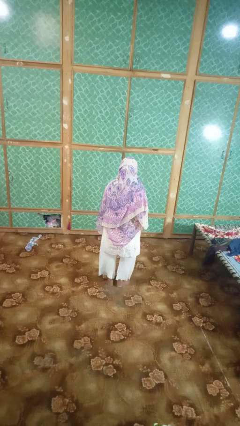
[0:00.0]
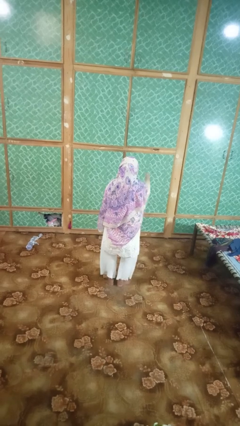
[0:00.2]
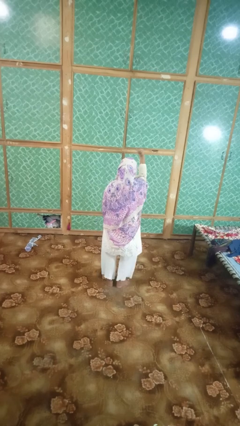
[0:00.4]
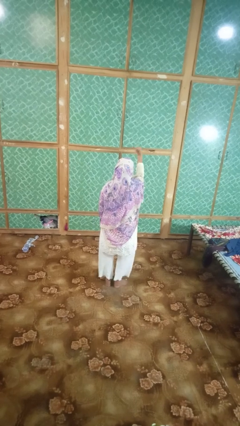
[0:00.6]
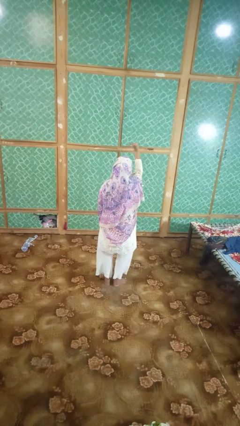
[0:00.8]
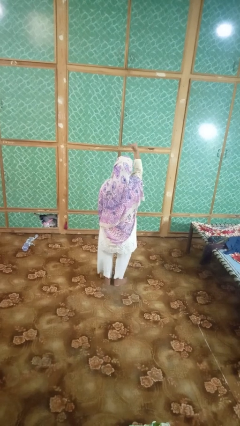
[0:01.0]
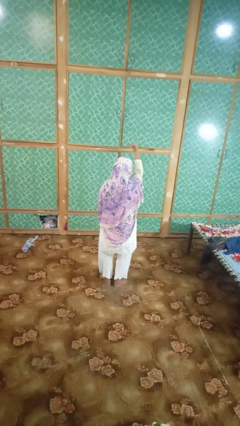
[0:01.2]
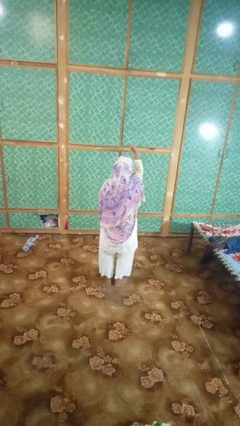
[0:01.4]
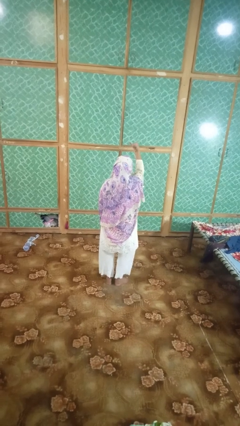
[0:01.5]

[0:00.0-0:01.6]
person gestures hang loose

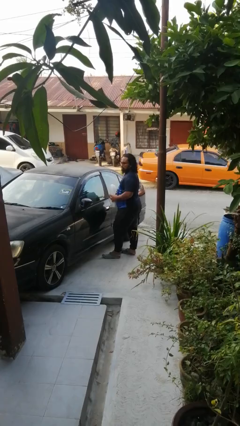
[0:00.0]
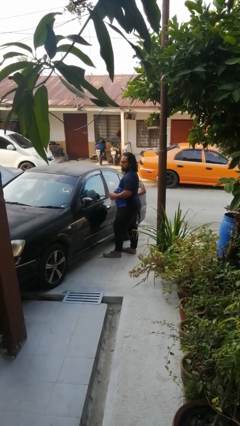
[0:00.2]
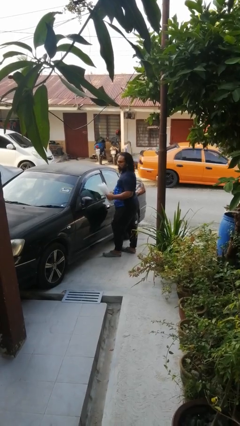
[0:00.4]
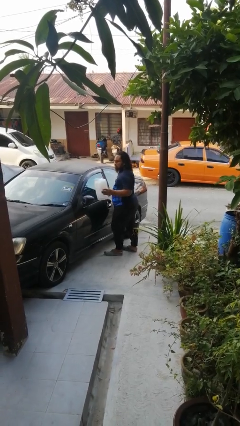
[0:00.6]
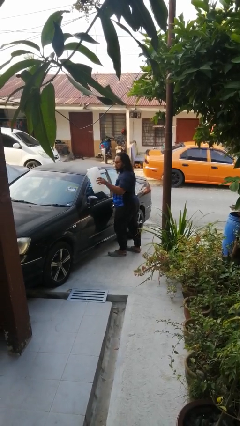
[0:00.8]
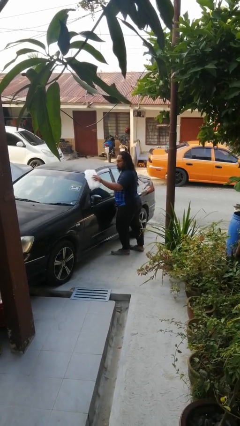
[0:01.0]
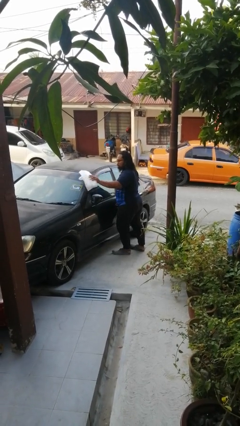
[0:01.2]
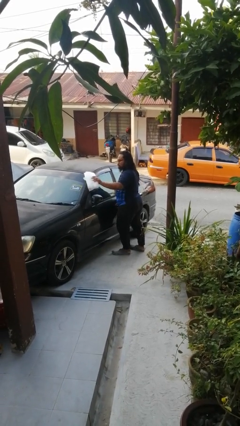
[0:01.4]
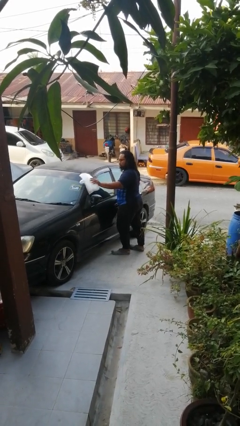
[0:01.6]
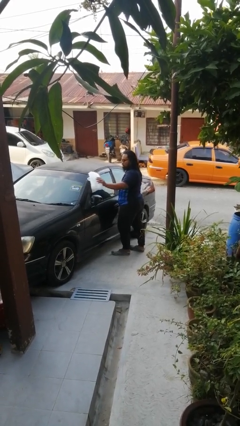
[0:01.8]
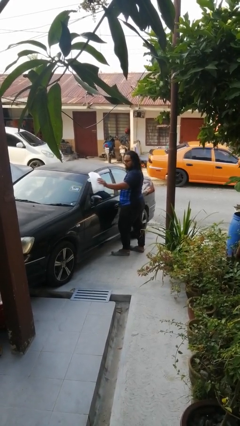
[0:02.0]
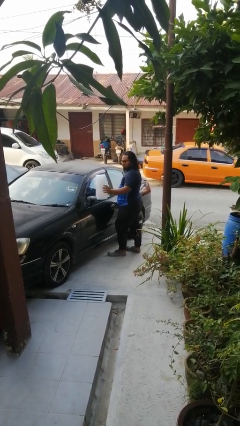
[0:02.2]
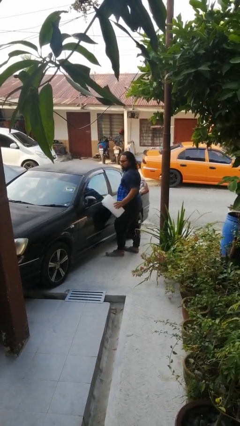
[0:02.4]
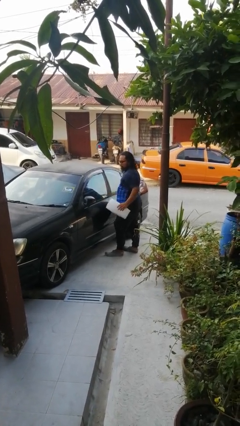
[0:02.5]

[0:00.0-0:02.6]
person polishes car with rag

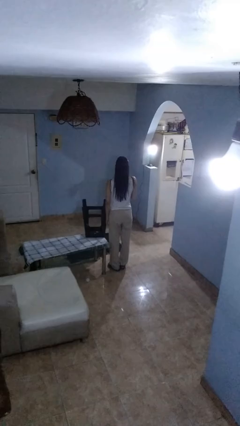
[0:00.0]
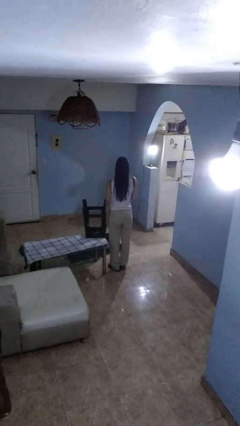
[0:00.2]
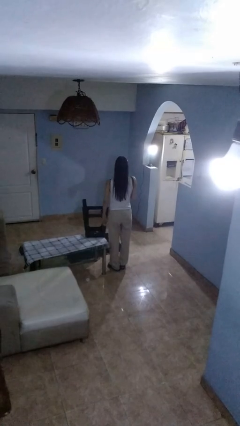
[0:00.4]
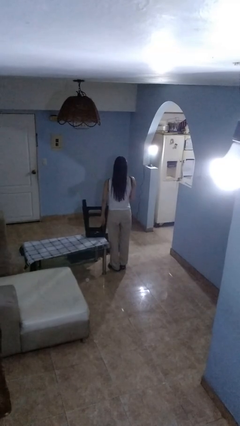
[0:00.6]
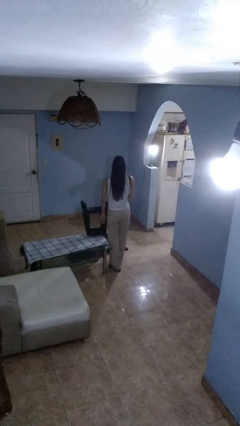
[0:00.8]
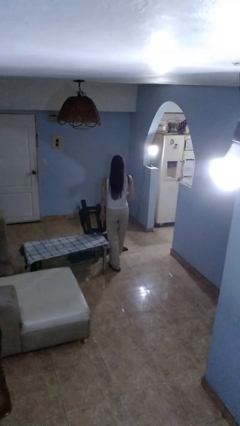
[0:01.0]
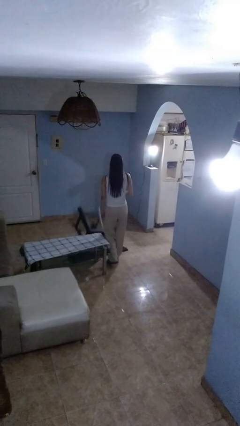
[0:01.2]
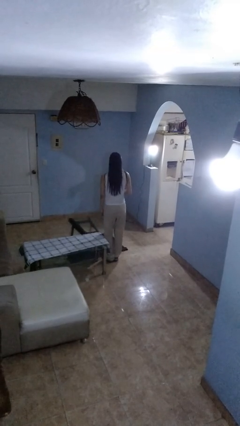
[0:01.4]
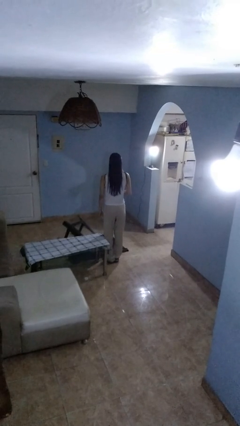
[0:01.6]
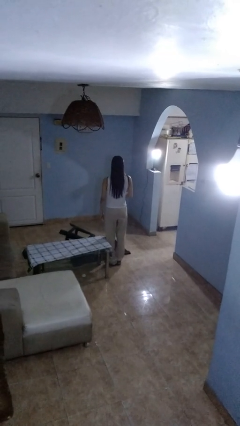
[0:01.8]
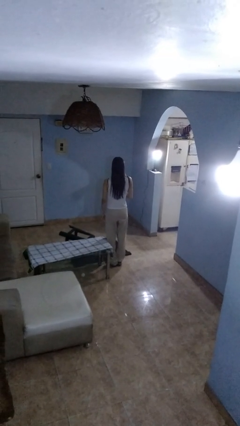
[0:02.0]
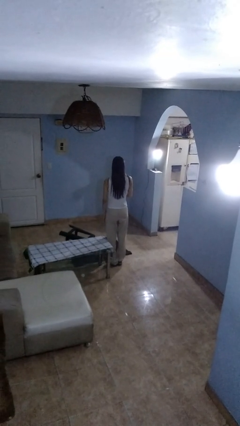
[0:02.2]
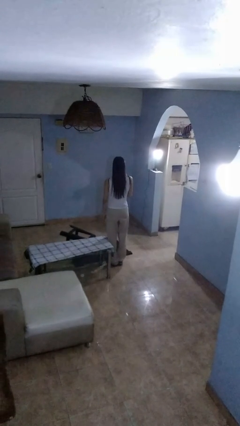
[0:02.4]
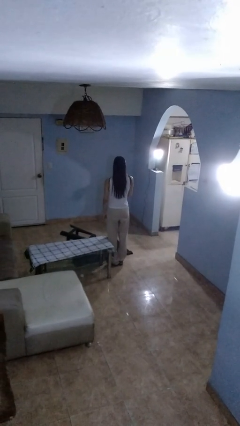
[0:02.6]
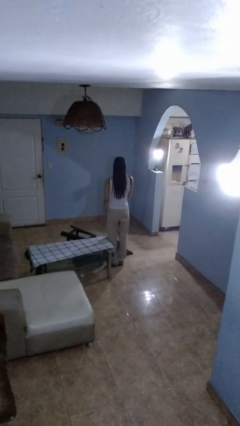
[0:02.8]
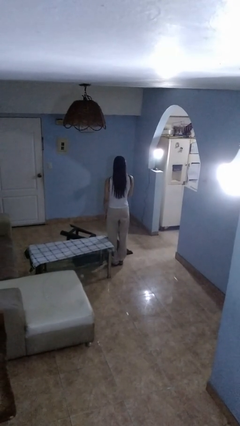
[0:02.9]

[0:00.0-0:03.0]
person knocks over furniture

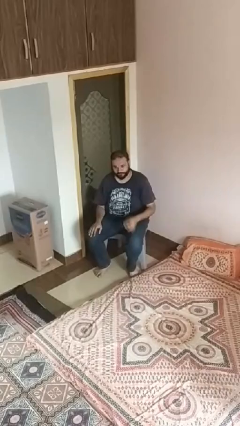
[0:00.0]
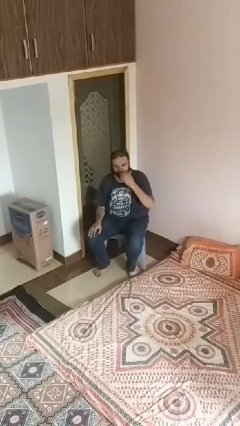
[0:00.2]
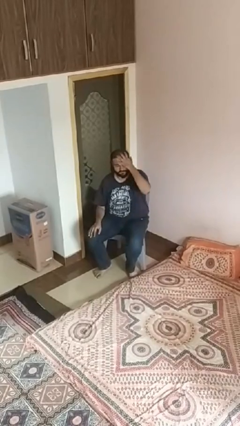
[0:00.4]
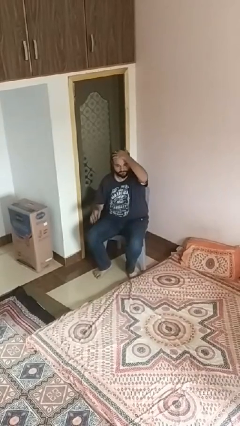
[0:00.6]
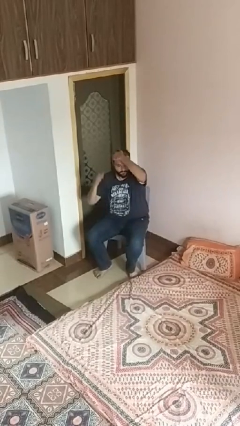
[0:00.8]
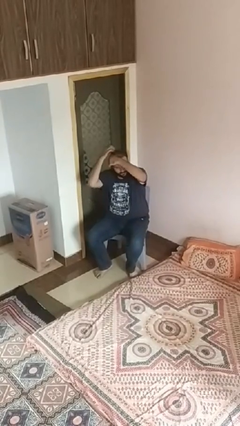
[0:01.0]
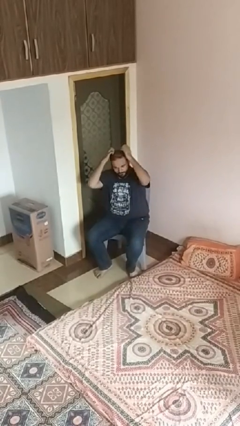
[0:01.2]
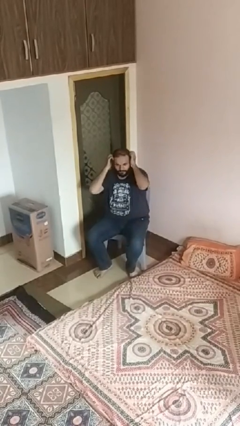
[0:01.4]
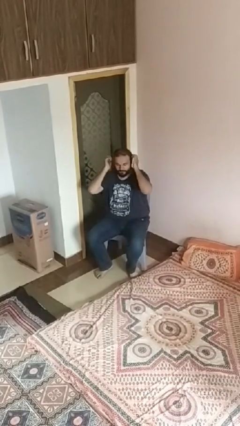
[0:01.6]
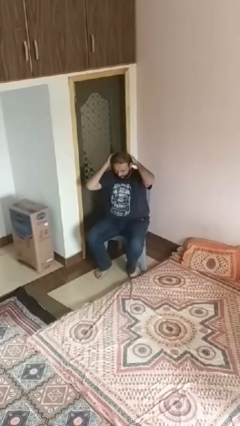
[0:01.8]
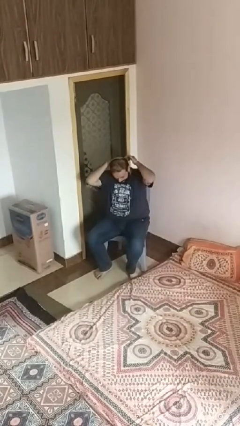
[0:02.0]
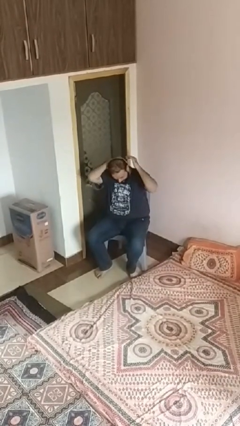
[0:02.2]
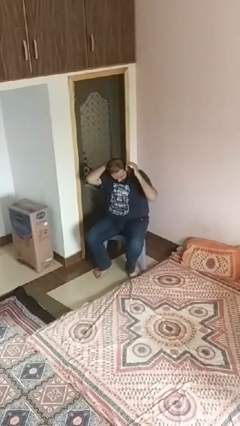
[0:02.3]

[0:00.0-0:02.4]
person strokes hair

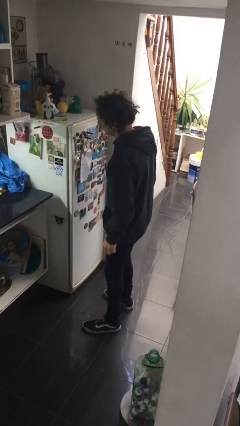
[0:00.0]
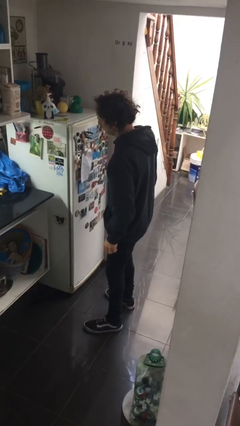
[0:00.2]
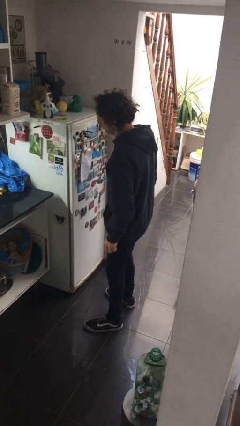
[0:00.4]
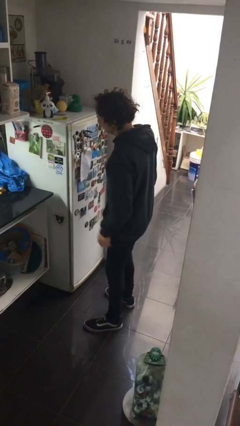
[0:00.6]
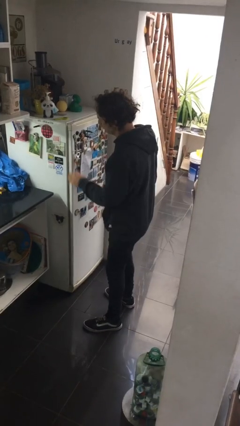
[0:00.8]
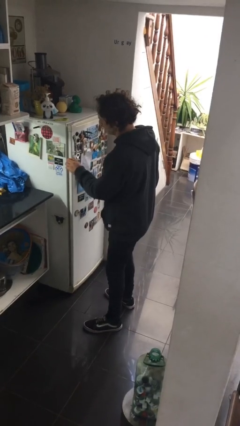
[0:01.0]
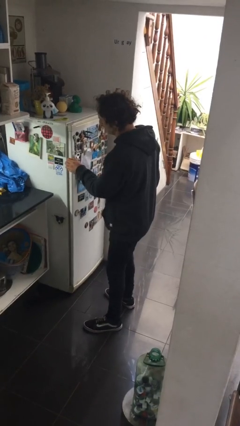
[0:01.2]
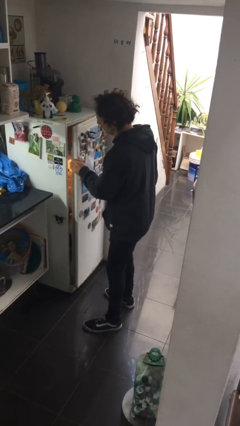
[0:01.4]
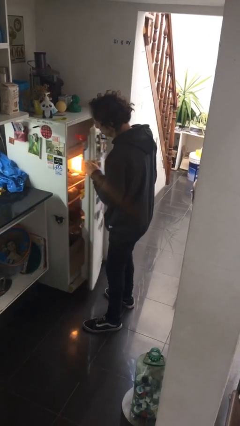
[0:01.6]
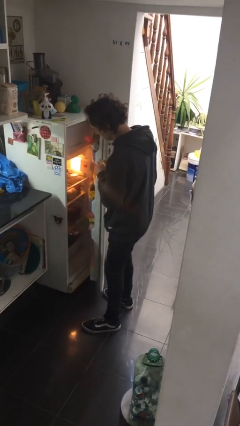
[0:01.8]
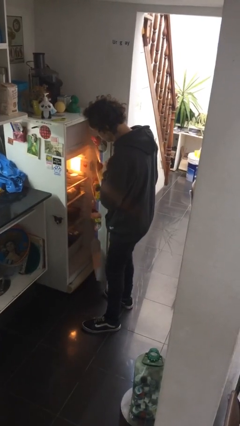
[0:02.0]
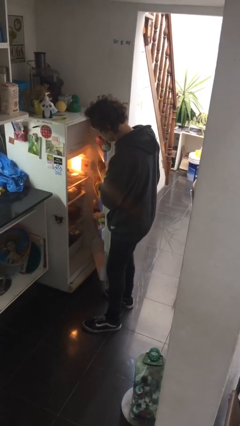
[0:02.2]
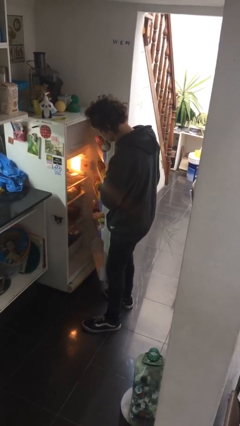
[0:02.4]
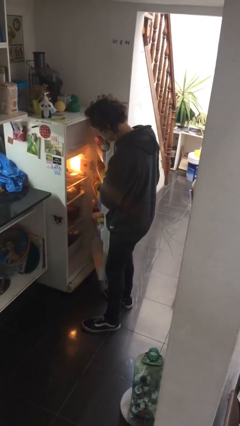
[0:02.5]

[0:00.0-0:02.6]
person opens refrigerator

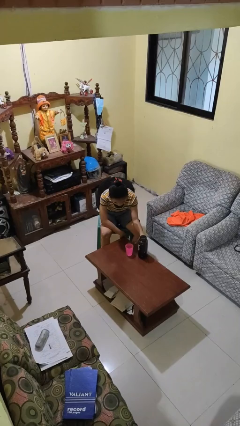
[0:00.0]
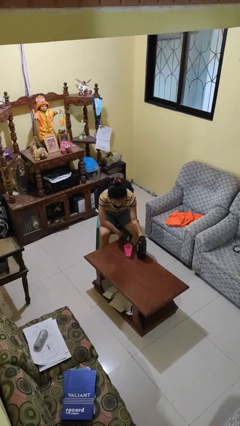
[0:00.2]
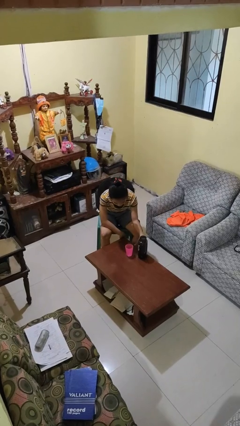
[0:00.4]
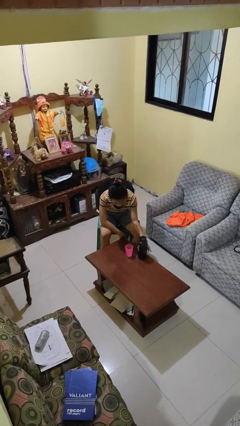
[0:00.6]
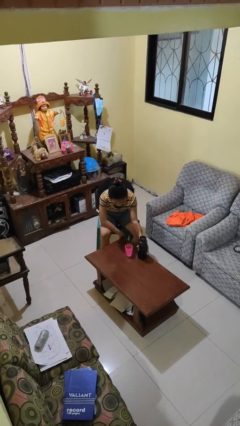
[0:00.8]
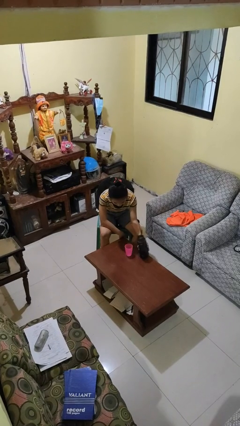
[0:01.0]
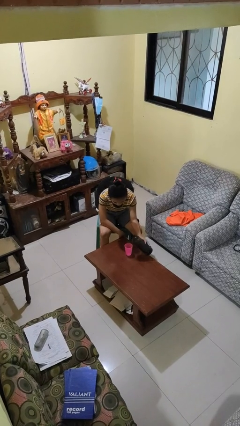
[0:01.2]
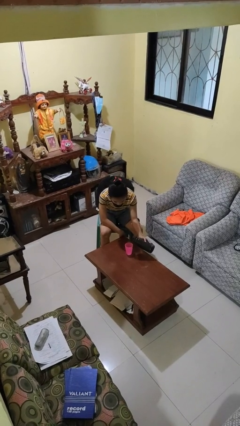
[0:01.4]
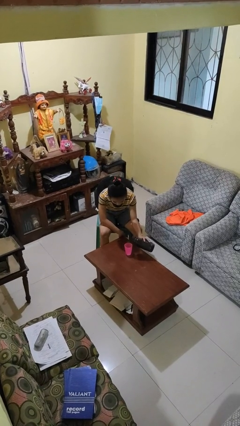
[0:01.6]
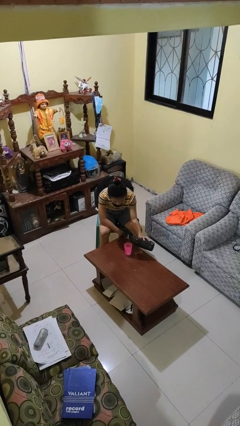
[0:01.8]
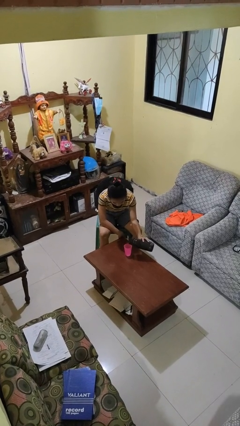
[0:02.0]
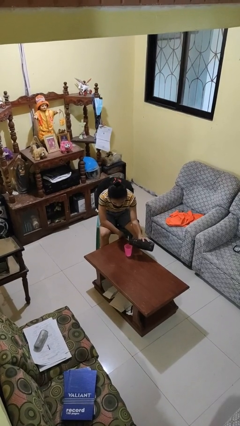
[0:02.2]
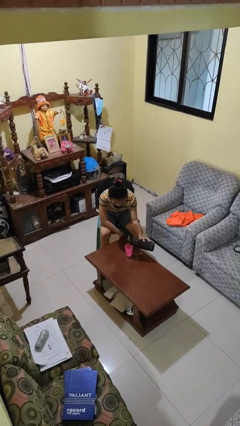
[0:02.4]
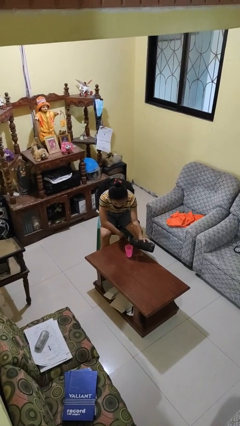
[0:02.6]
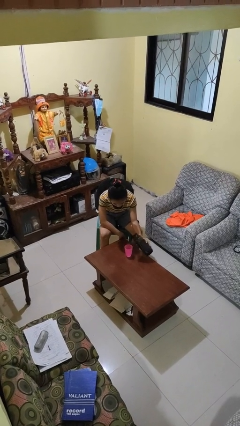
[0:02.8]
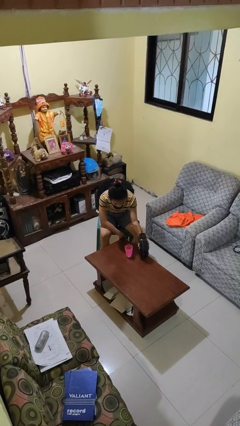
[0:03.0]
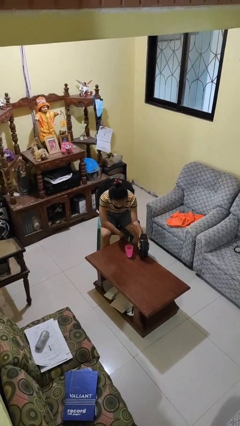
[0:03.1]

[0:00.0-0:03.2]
person pours liquid into cup

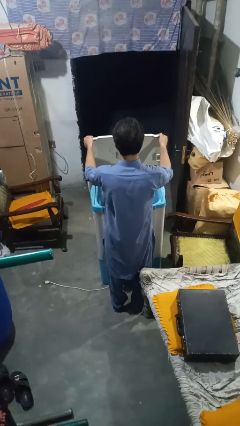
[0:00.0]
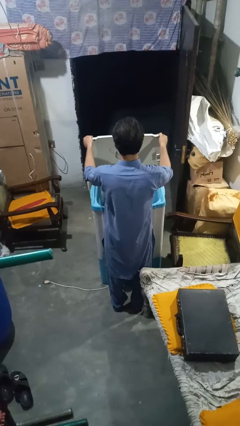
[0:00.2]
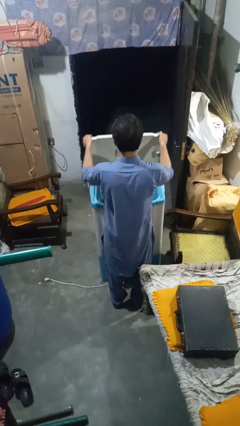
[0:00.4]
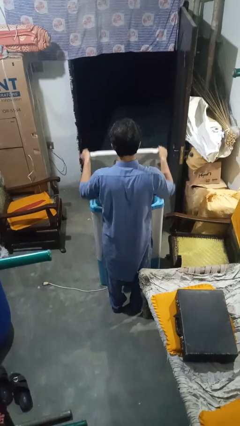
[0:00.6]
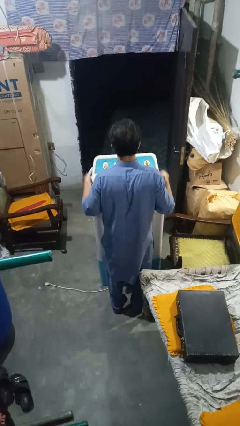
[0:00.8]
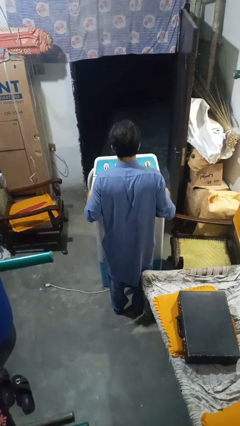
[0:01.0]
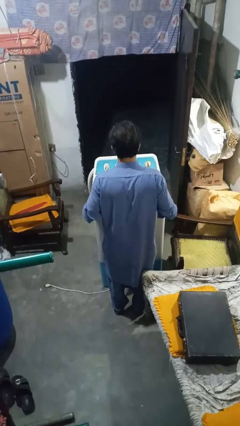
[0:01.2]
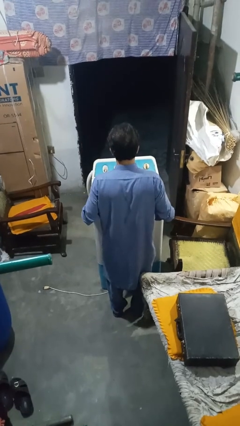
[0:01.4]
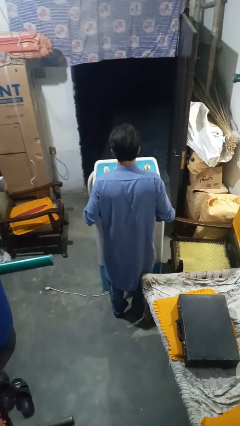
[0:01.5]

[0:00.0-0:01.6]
person closes clothes washer
